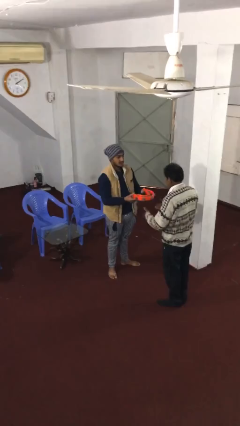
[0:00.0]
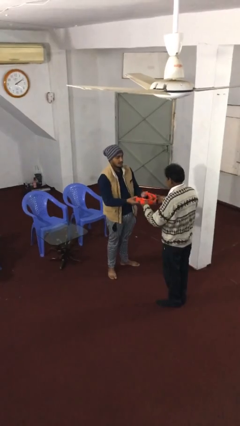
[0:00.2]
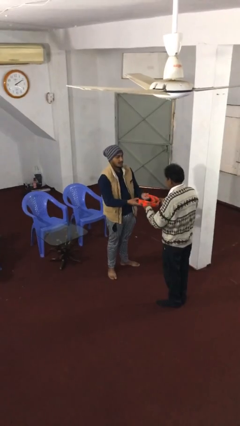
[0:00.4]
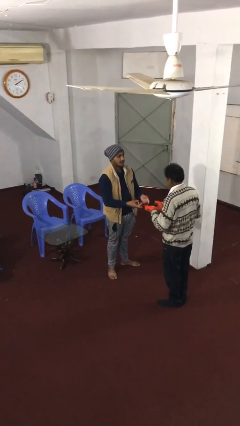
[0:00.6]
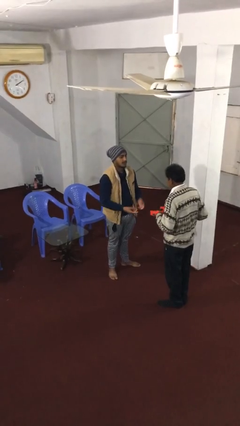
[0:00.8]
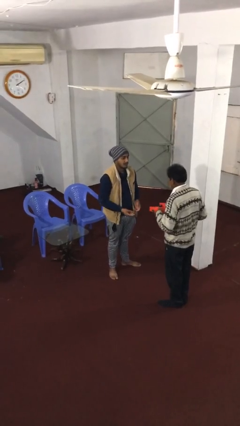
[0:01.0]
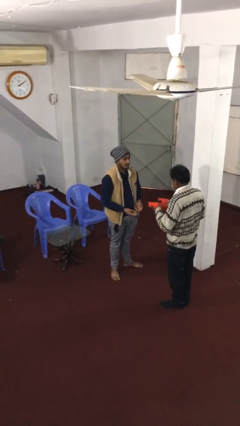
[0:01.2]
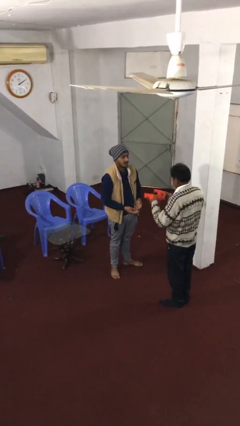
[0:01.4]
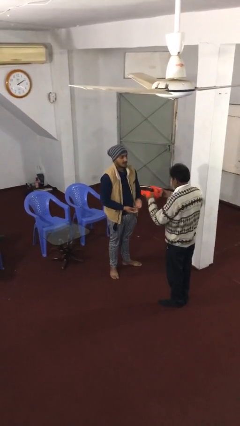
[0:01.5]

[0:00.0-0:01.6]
person transfers object to person

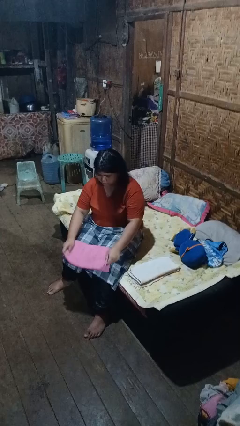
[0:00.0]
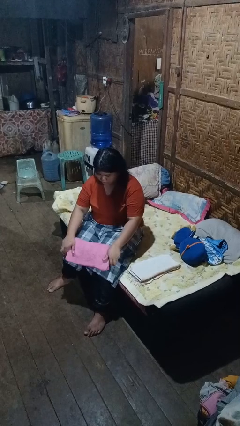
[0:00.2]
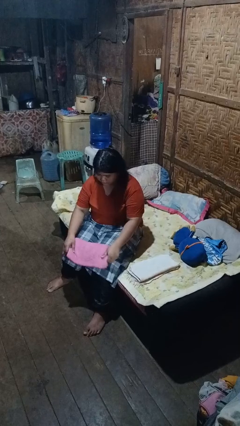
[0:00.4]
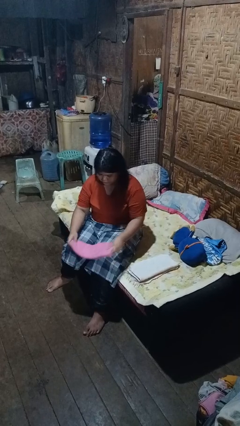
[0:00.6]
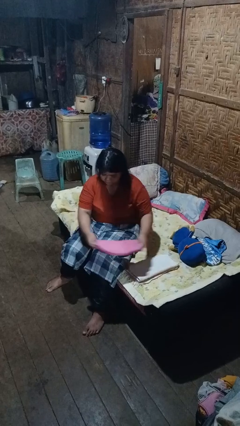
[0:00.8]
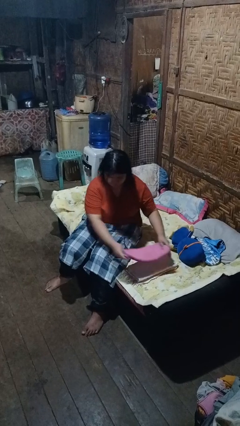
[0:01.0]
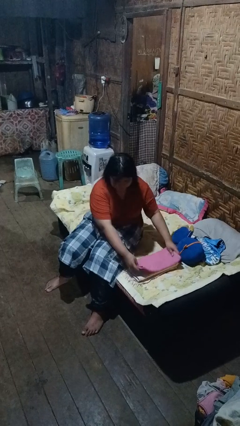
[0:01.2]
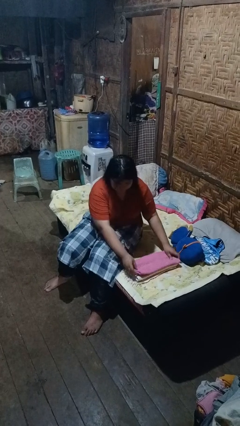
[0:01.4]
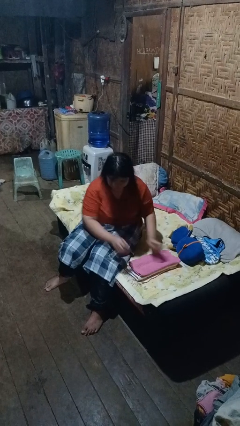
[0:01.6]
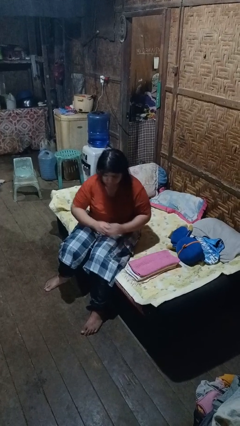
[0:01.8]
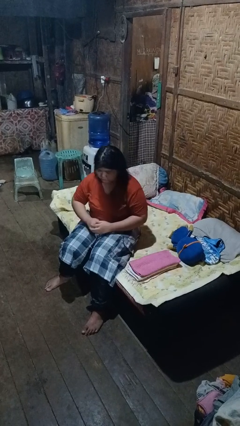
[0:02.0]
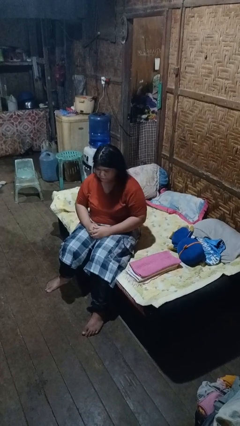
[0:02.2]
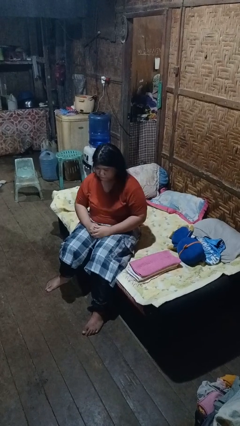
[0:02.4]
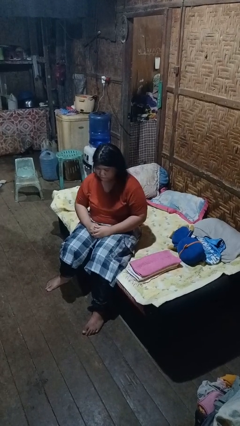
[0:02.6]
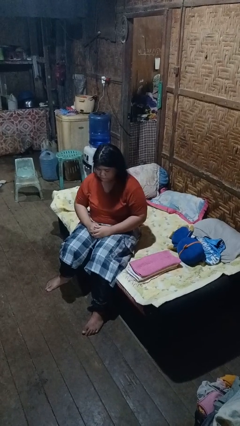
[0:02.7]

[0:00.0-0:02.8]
person folds towel

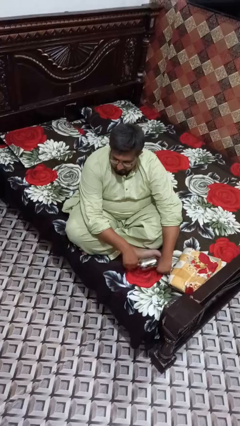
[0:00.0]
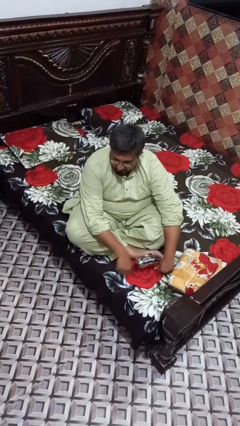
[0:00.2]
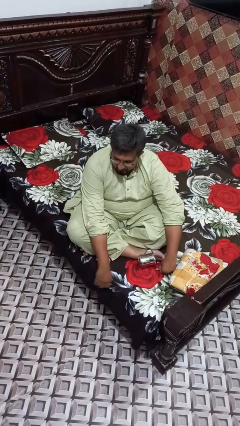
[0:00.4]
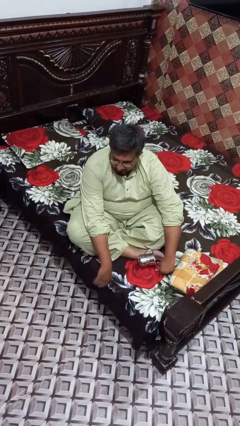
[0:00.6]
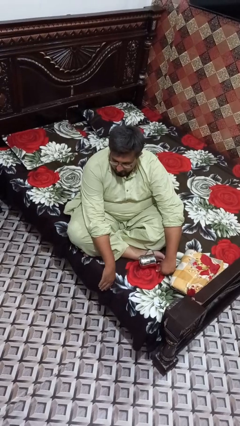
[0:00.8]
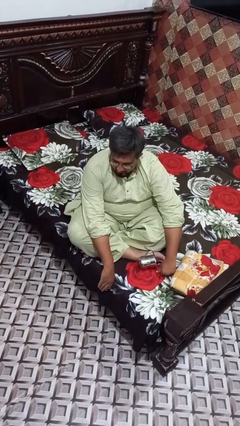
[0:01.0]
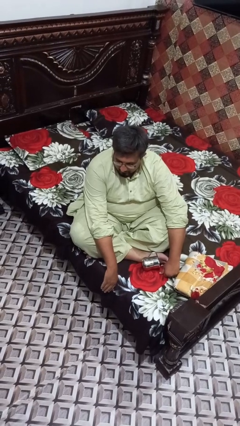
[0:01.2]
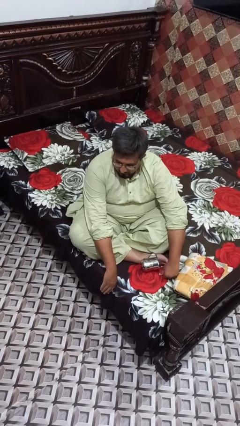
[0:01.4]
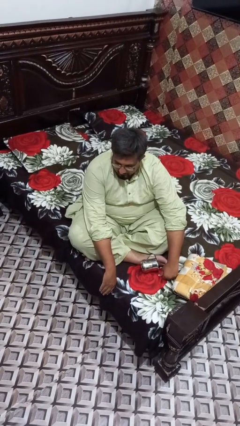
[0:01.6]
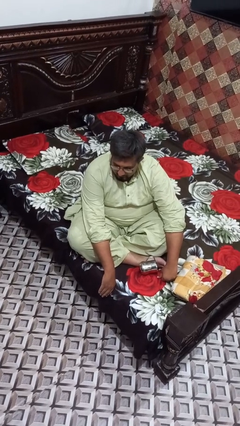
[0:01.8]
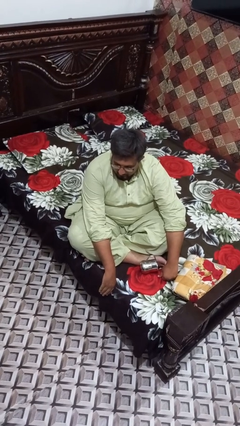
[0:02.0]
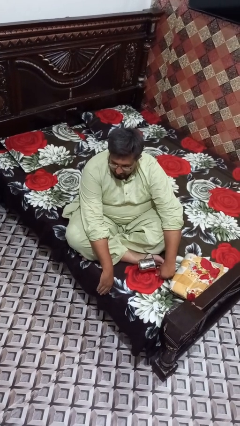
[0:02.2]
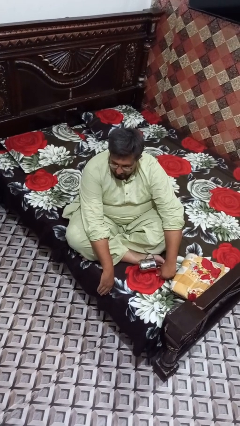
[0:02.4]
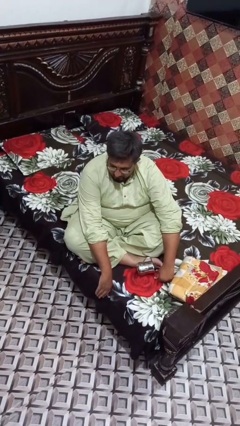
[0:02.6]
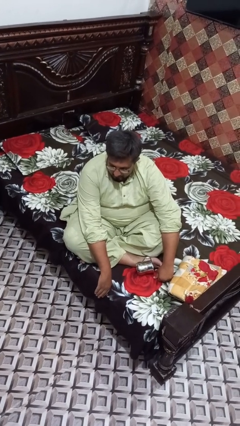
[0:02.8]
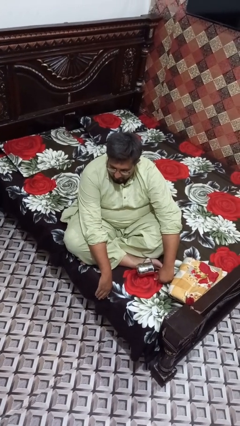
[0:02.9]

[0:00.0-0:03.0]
person knocks over glass

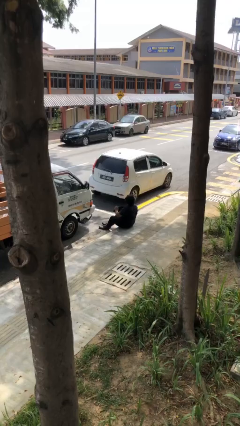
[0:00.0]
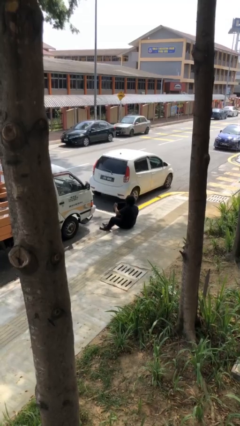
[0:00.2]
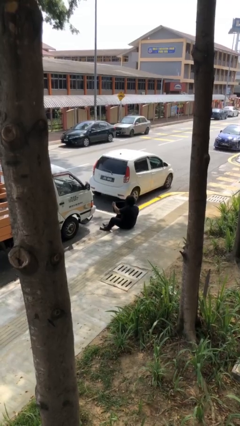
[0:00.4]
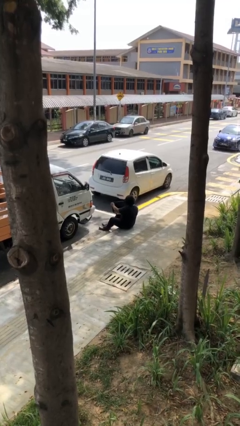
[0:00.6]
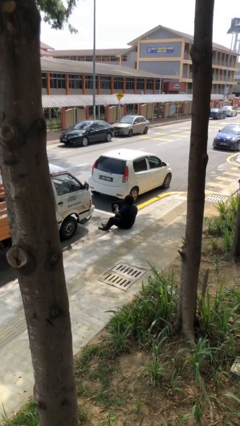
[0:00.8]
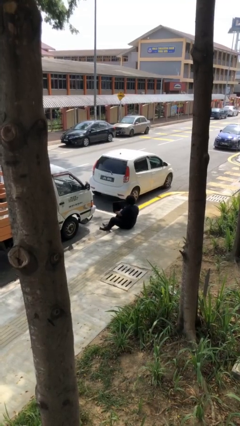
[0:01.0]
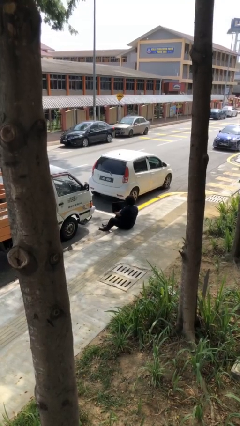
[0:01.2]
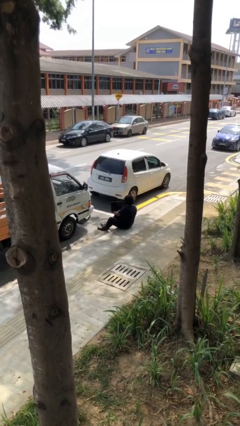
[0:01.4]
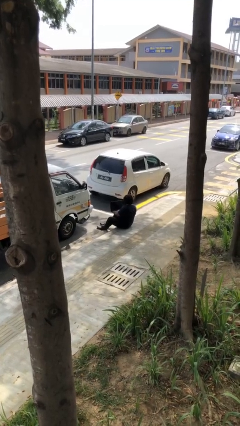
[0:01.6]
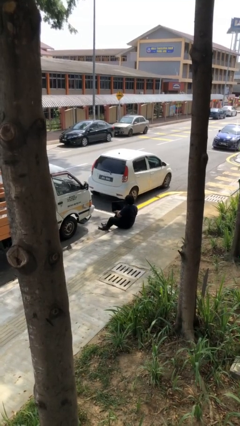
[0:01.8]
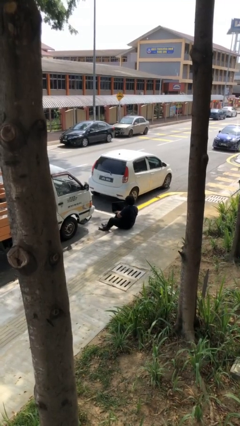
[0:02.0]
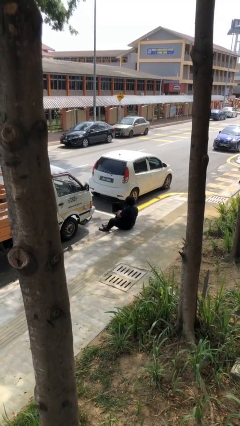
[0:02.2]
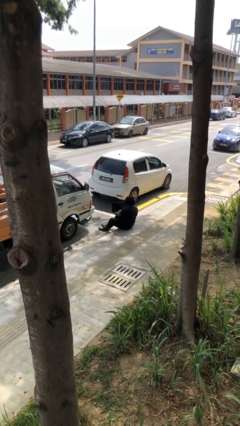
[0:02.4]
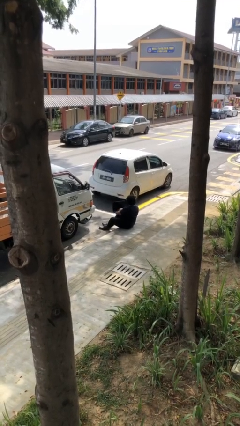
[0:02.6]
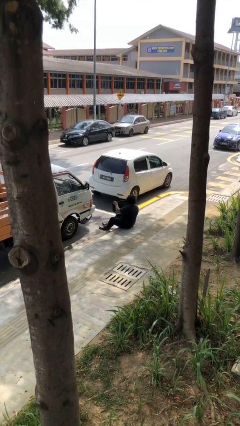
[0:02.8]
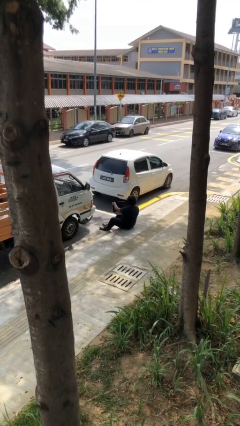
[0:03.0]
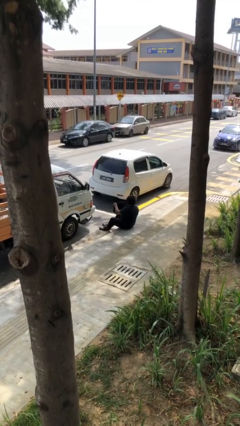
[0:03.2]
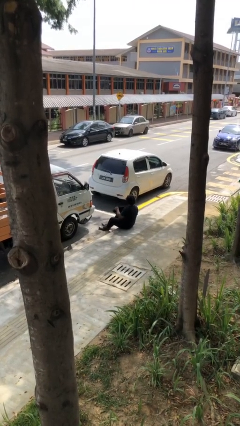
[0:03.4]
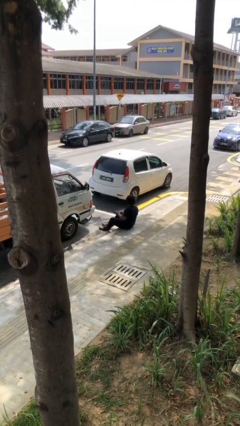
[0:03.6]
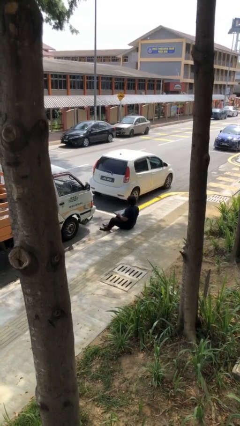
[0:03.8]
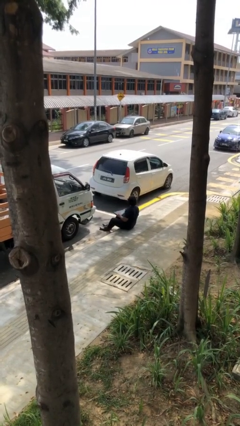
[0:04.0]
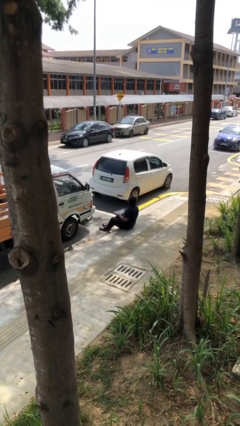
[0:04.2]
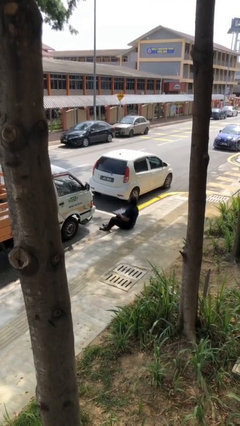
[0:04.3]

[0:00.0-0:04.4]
person interacts with laptop

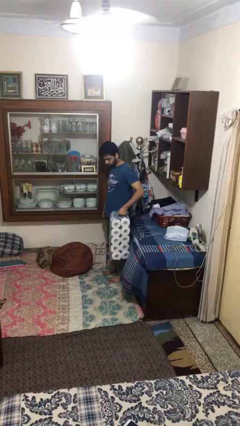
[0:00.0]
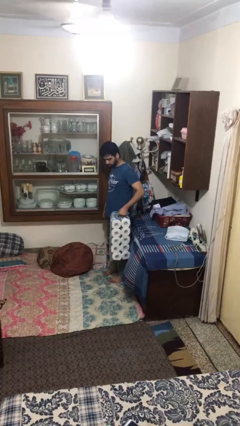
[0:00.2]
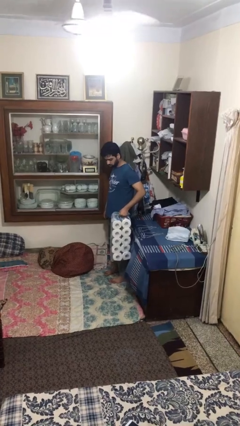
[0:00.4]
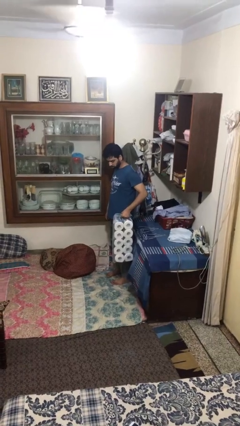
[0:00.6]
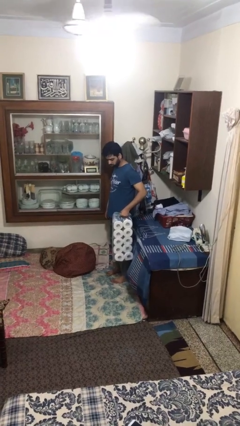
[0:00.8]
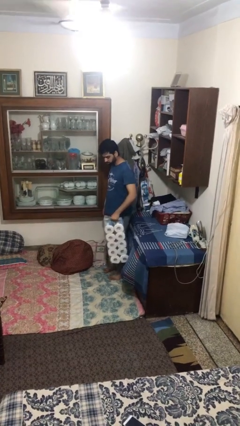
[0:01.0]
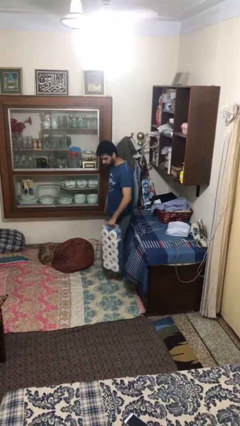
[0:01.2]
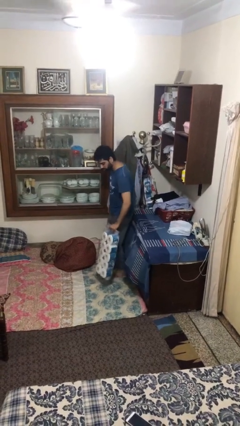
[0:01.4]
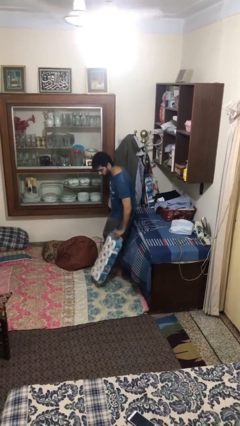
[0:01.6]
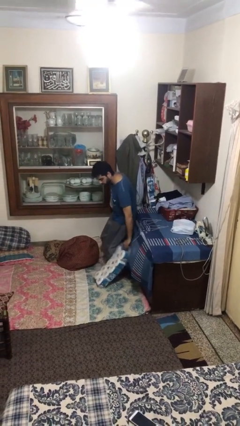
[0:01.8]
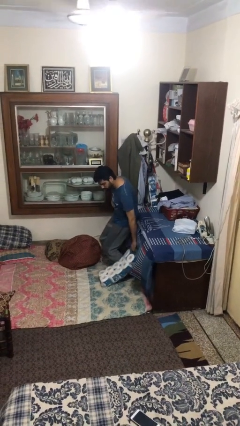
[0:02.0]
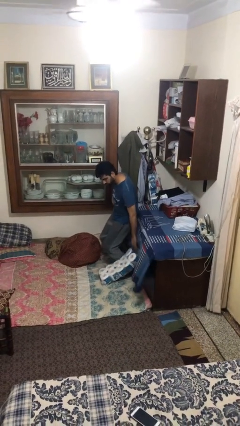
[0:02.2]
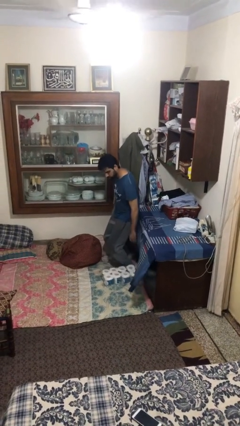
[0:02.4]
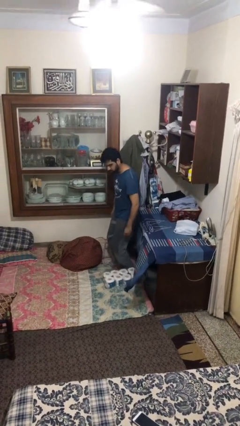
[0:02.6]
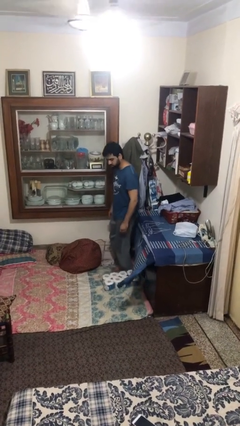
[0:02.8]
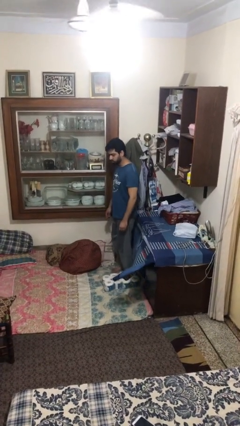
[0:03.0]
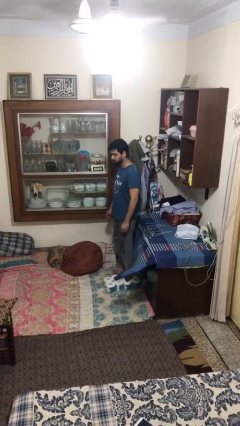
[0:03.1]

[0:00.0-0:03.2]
person puts down object on floor

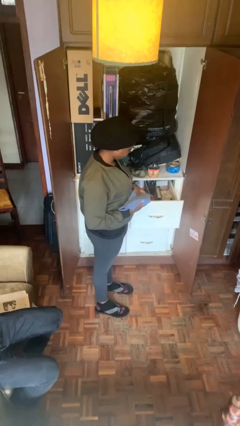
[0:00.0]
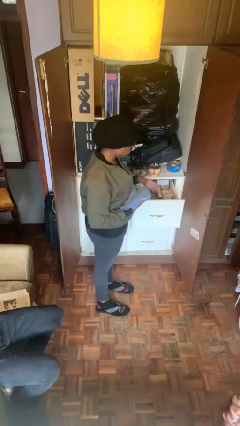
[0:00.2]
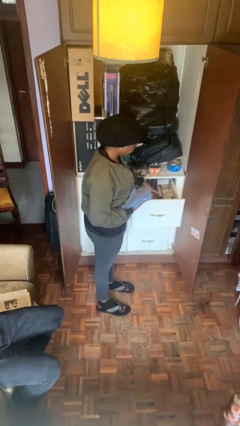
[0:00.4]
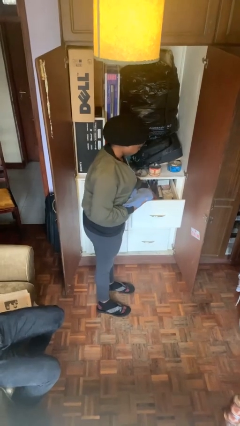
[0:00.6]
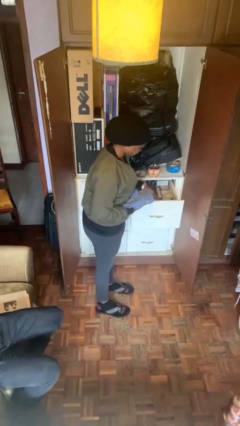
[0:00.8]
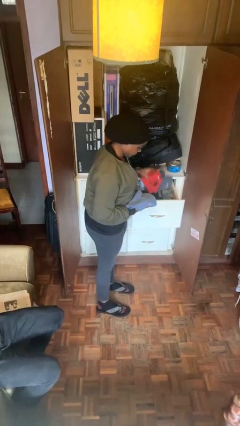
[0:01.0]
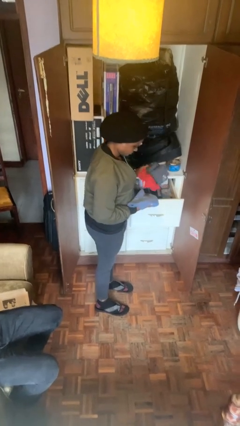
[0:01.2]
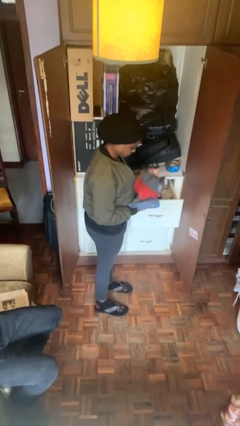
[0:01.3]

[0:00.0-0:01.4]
person takes clothes from dresser

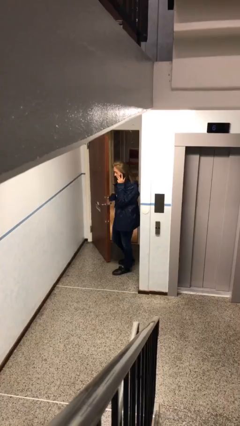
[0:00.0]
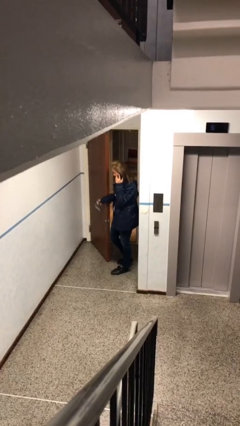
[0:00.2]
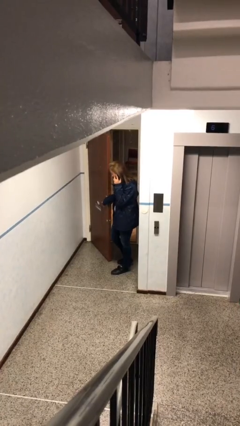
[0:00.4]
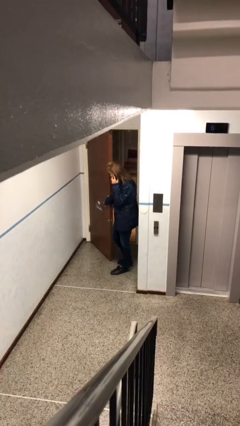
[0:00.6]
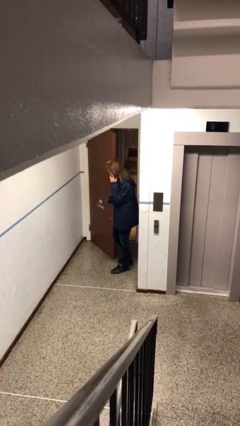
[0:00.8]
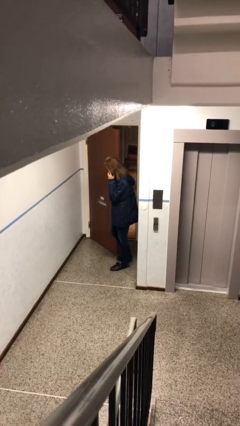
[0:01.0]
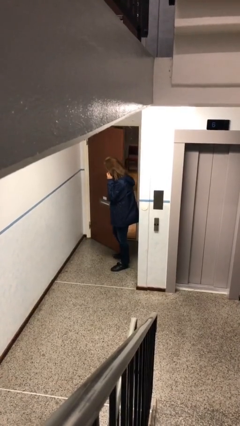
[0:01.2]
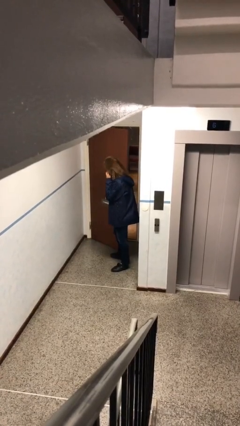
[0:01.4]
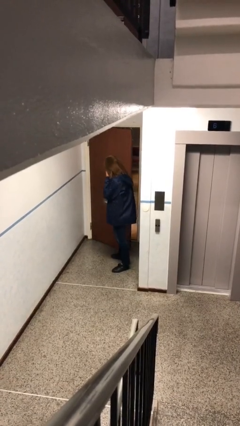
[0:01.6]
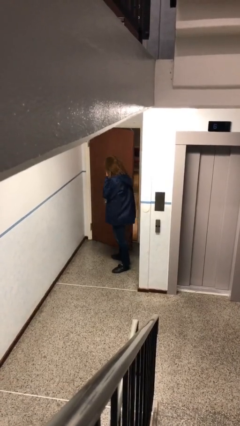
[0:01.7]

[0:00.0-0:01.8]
person enters scene through structure
